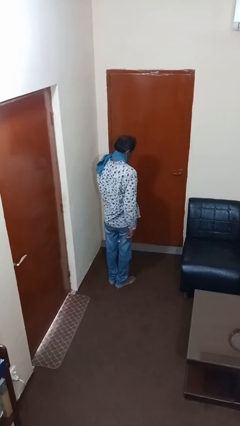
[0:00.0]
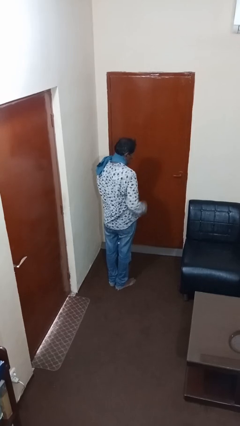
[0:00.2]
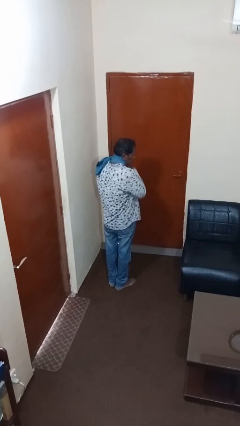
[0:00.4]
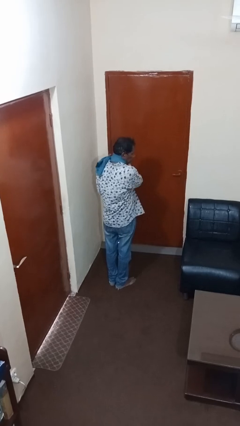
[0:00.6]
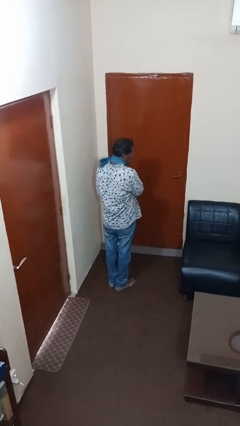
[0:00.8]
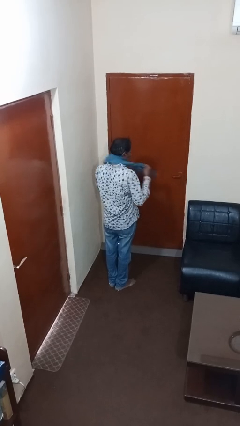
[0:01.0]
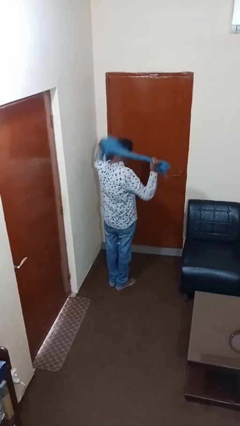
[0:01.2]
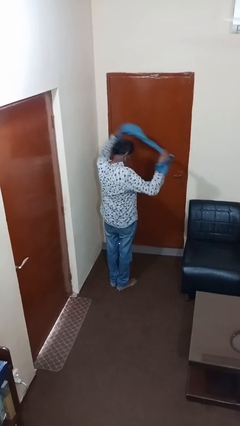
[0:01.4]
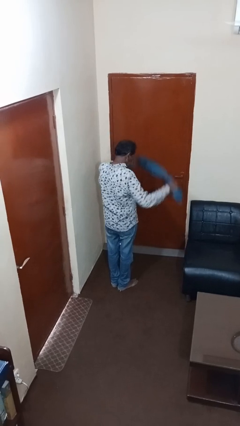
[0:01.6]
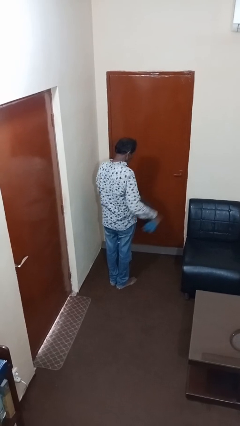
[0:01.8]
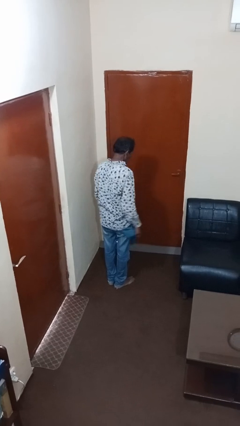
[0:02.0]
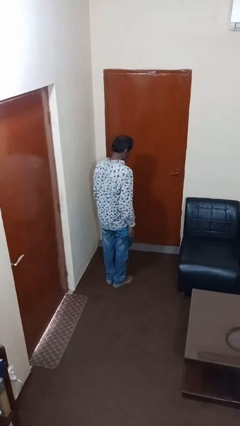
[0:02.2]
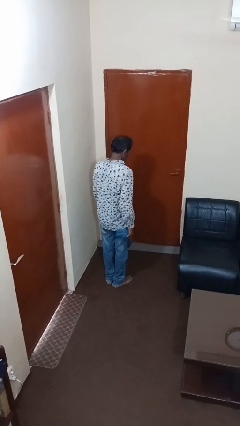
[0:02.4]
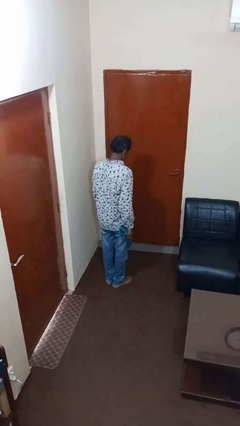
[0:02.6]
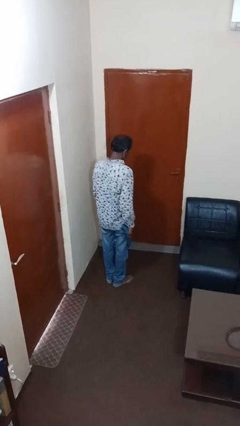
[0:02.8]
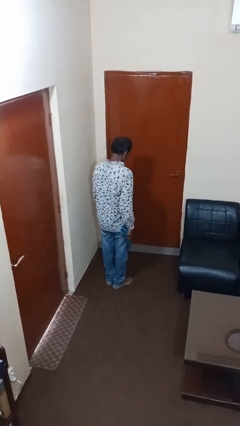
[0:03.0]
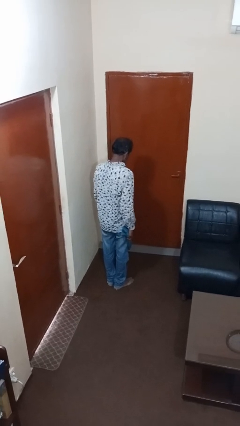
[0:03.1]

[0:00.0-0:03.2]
person takes off scarf

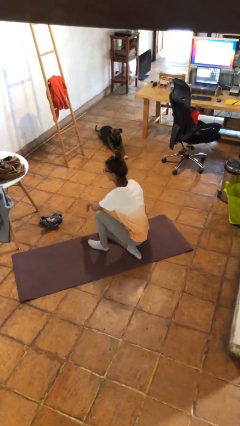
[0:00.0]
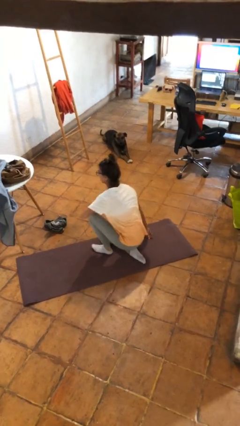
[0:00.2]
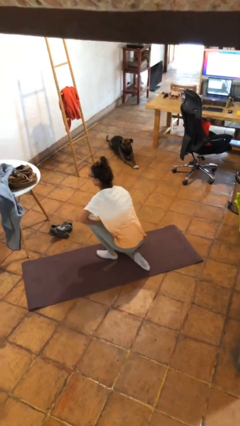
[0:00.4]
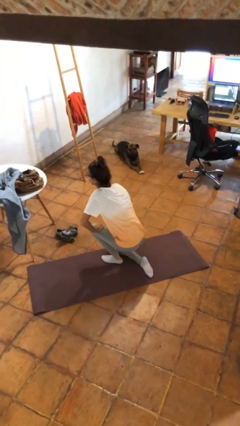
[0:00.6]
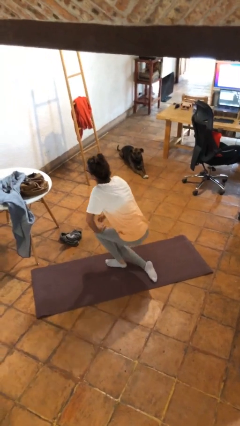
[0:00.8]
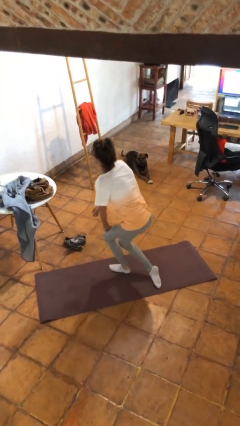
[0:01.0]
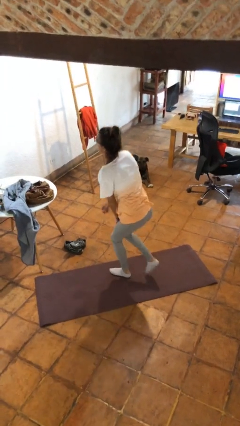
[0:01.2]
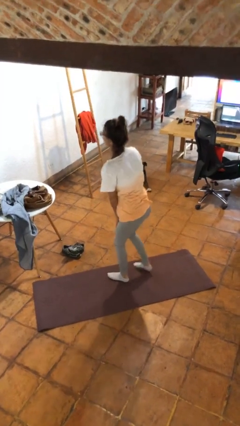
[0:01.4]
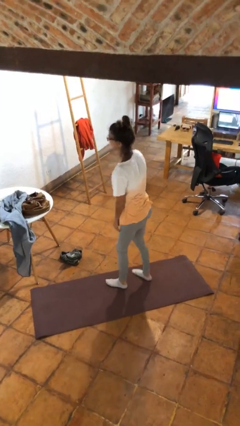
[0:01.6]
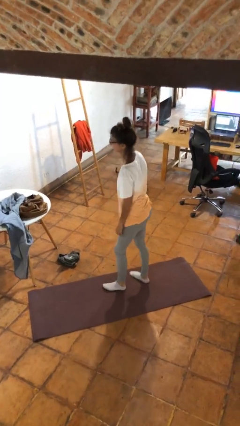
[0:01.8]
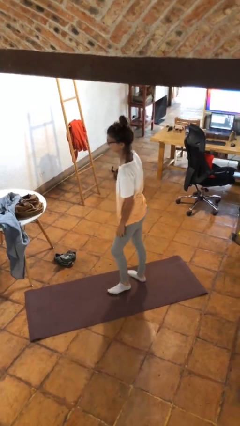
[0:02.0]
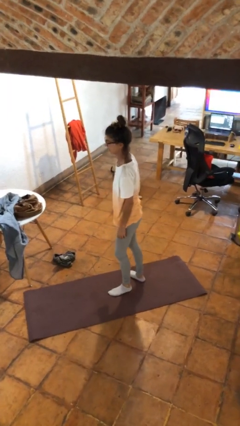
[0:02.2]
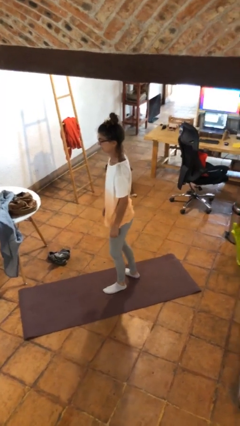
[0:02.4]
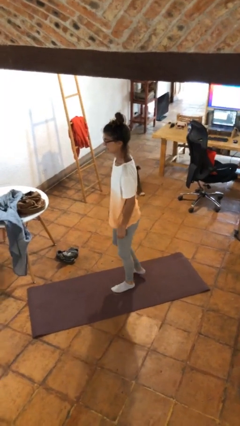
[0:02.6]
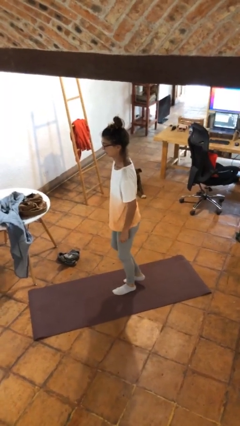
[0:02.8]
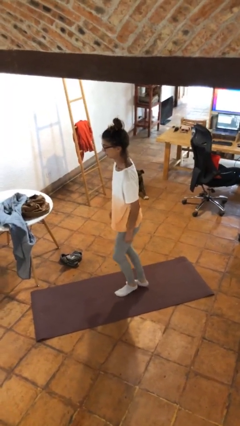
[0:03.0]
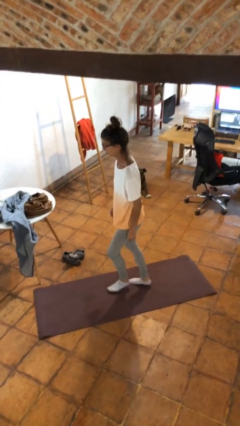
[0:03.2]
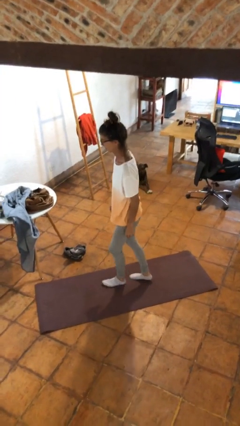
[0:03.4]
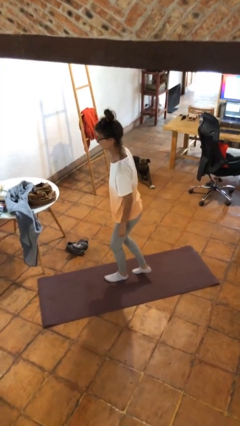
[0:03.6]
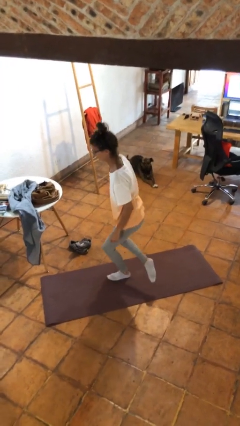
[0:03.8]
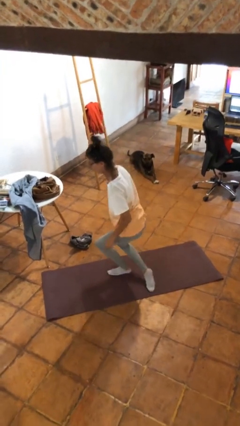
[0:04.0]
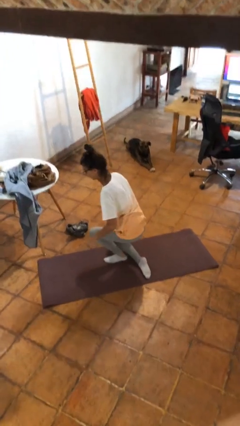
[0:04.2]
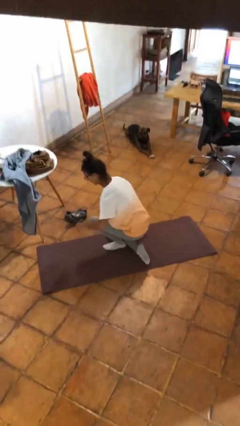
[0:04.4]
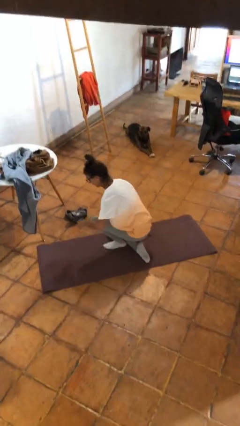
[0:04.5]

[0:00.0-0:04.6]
person sits crisscross

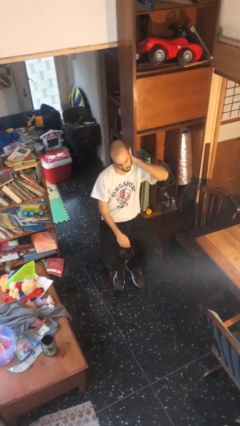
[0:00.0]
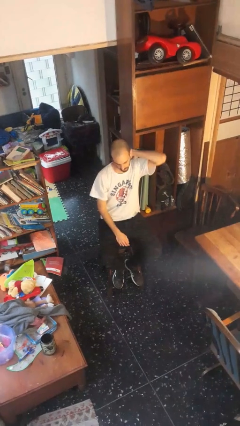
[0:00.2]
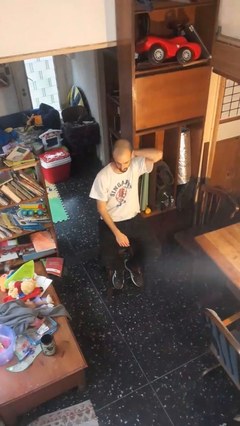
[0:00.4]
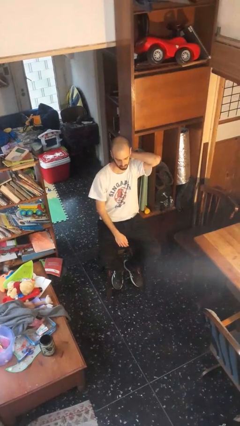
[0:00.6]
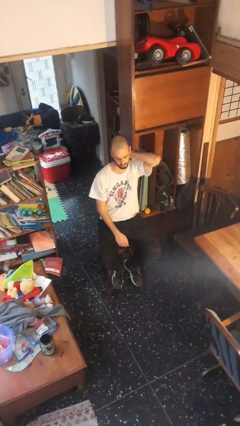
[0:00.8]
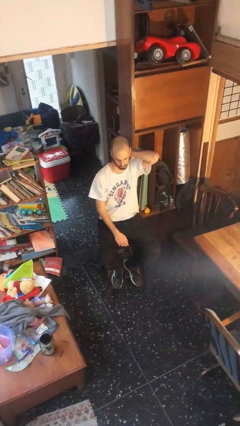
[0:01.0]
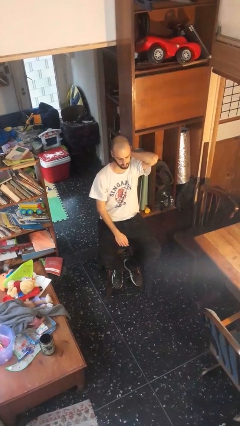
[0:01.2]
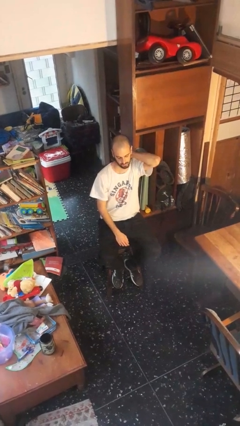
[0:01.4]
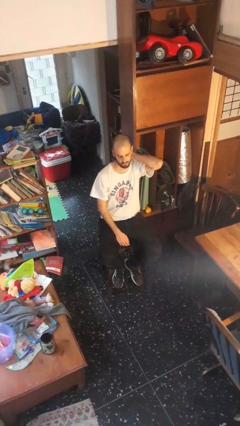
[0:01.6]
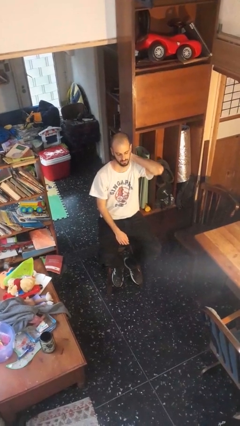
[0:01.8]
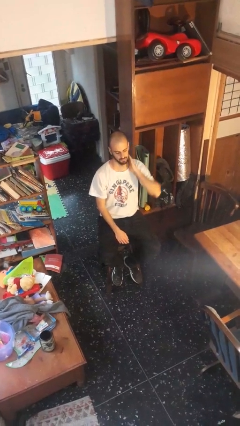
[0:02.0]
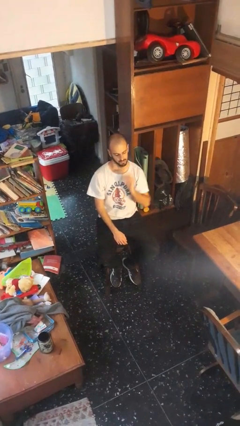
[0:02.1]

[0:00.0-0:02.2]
person rubs neck

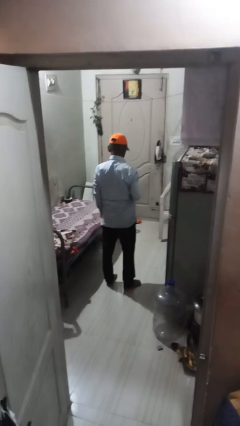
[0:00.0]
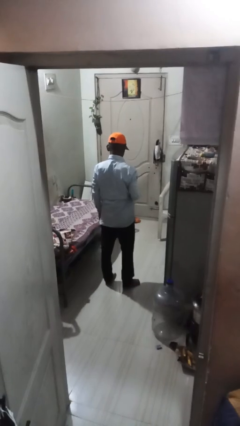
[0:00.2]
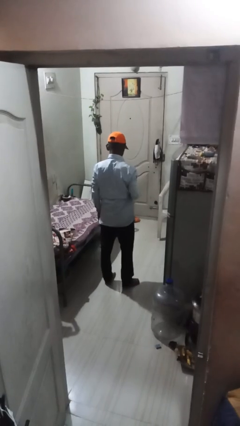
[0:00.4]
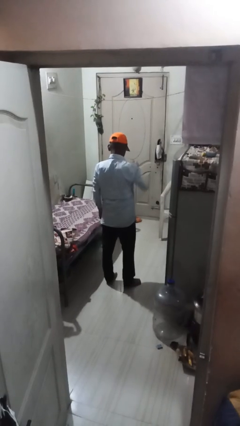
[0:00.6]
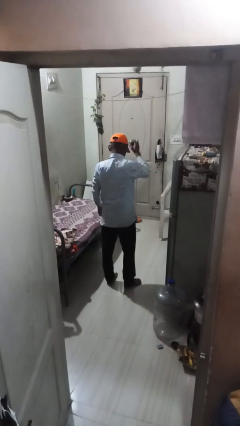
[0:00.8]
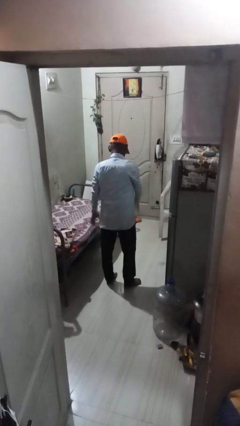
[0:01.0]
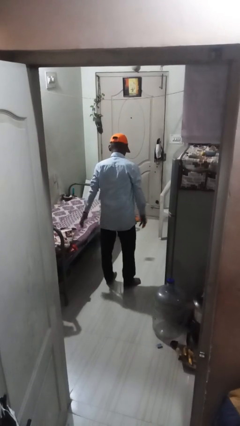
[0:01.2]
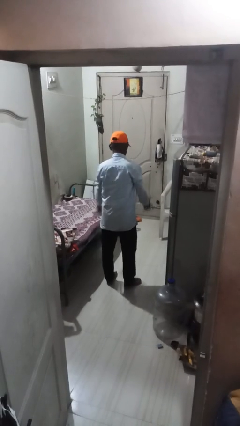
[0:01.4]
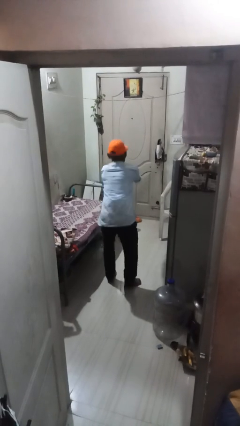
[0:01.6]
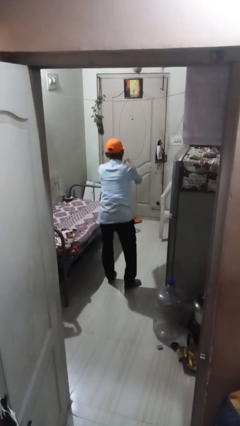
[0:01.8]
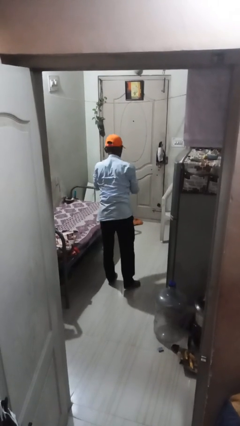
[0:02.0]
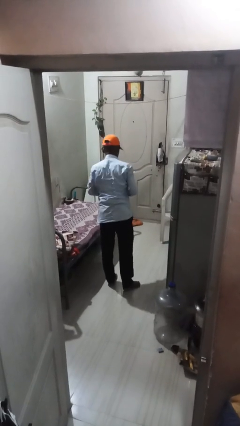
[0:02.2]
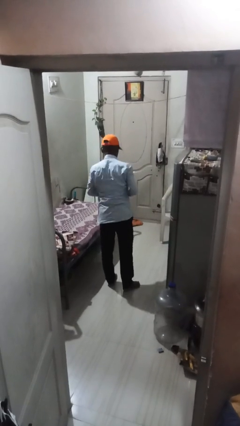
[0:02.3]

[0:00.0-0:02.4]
person bounces ball on floor

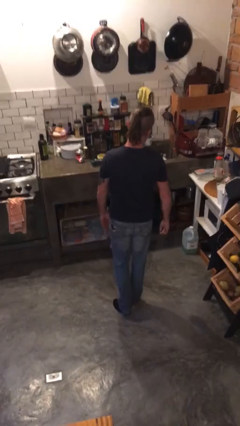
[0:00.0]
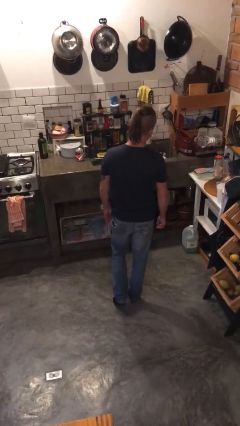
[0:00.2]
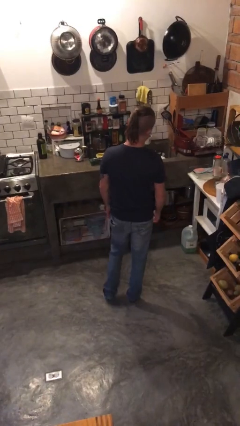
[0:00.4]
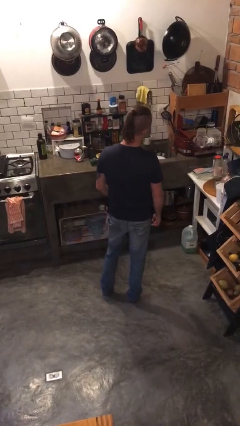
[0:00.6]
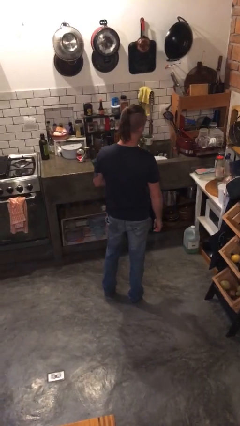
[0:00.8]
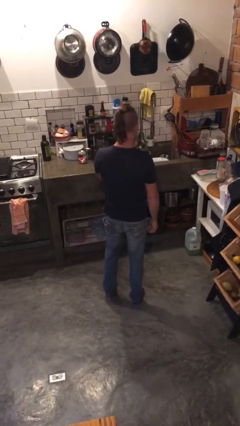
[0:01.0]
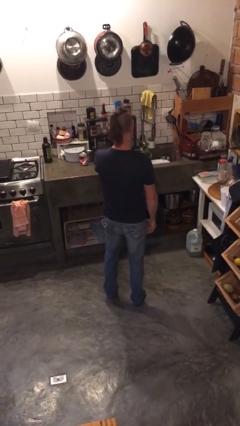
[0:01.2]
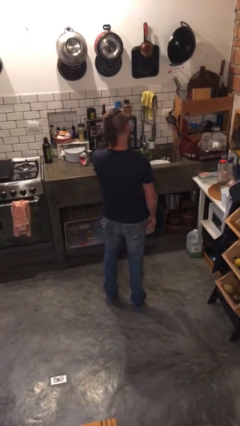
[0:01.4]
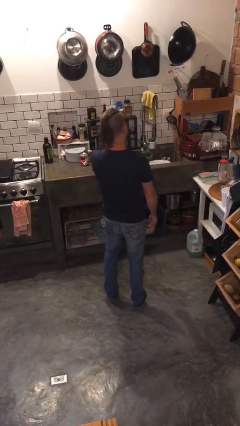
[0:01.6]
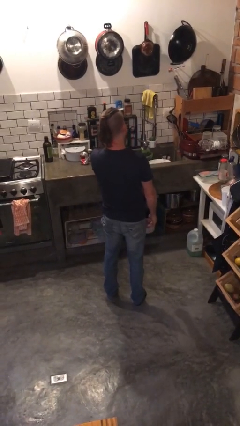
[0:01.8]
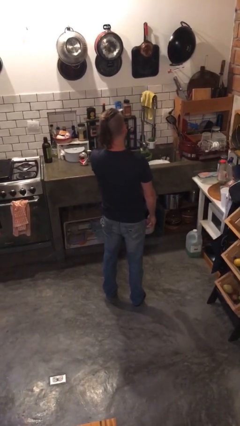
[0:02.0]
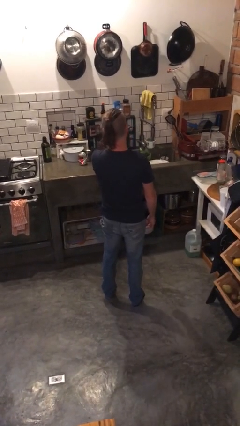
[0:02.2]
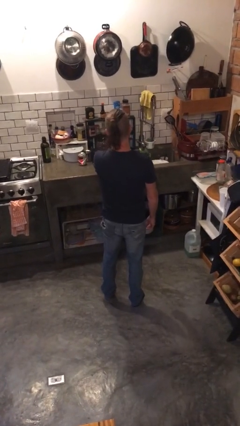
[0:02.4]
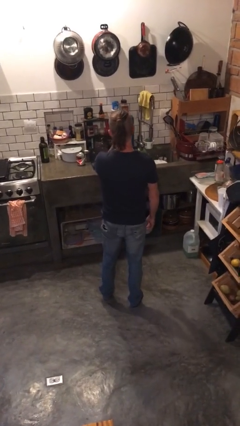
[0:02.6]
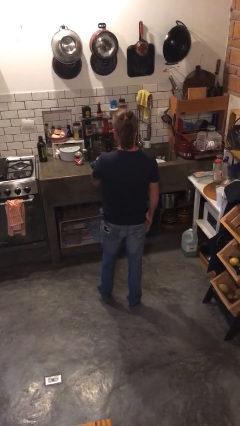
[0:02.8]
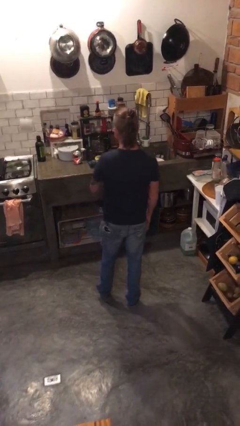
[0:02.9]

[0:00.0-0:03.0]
person yawns

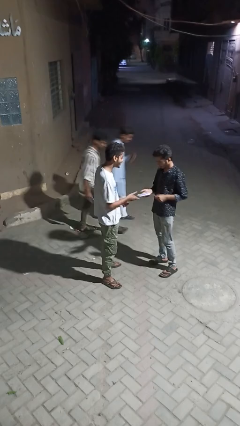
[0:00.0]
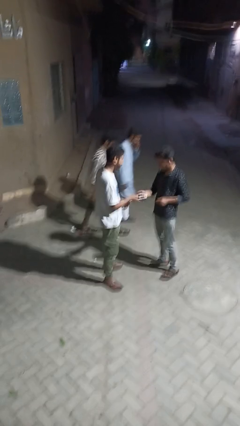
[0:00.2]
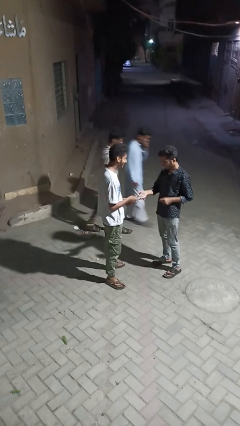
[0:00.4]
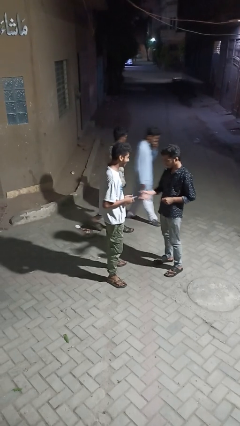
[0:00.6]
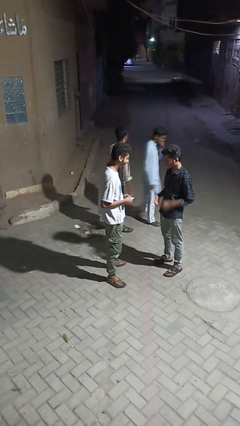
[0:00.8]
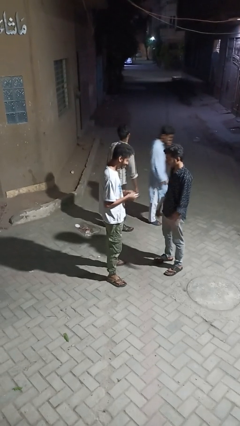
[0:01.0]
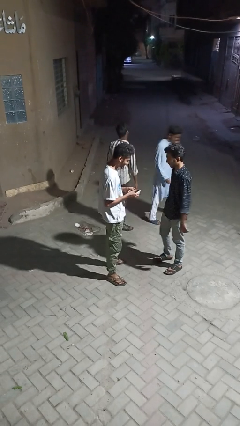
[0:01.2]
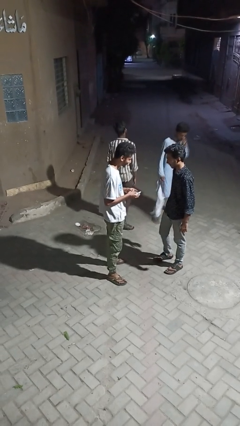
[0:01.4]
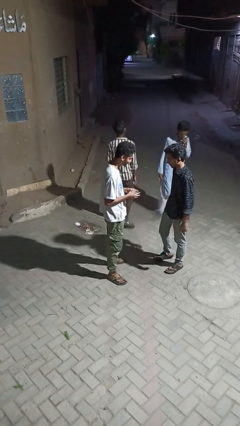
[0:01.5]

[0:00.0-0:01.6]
person transfers object to person
